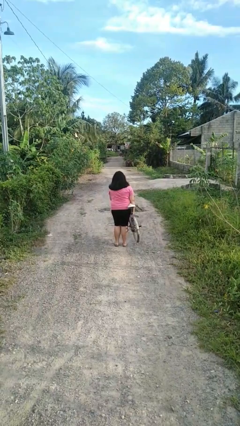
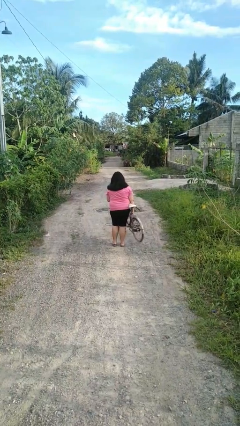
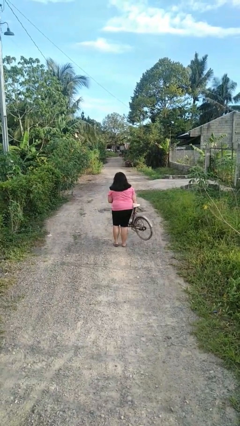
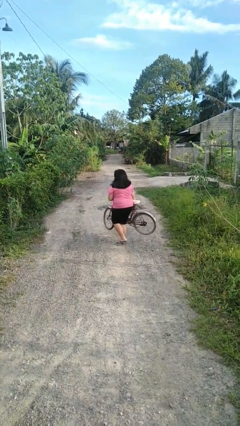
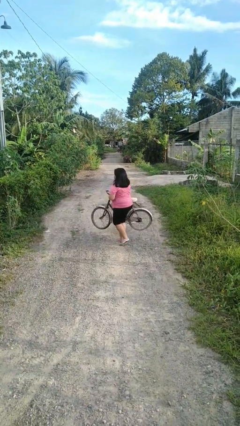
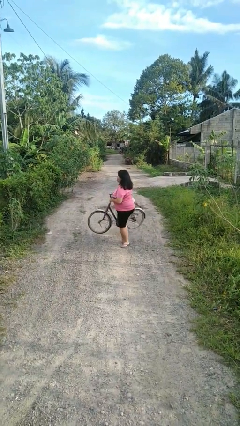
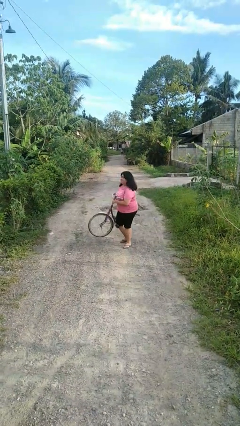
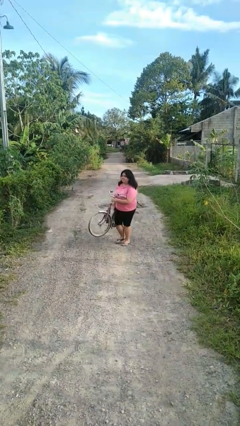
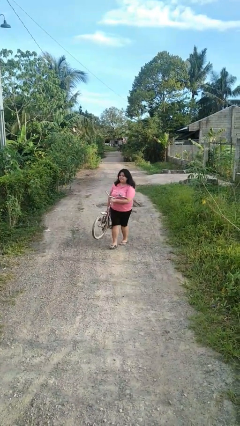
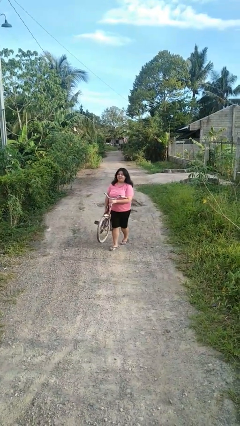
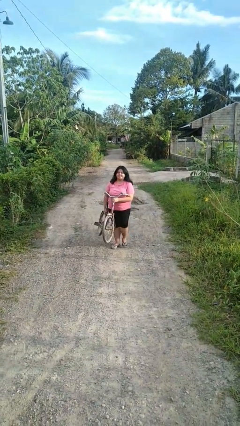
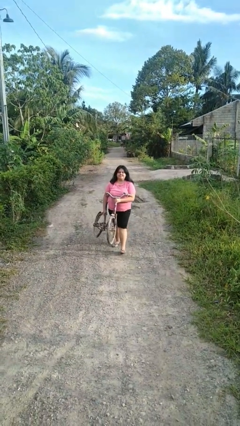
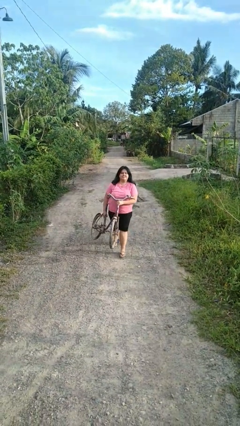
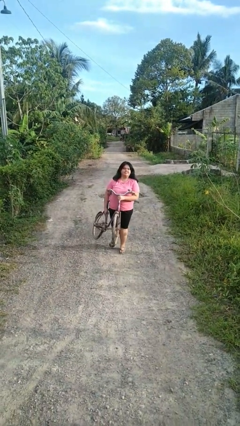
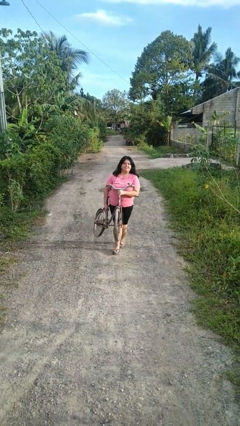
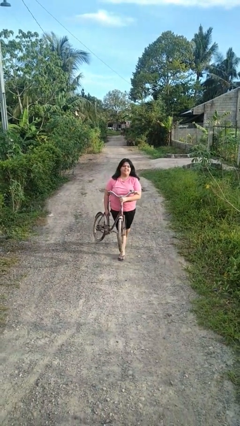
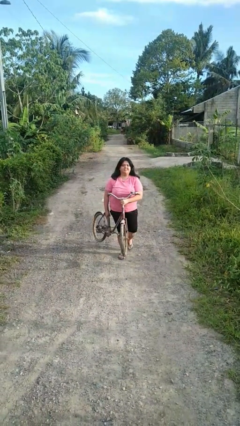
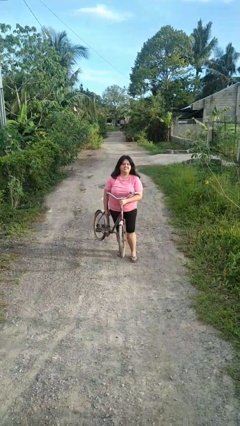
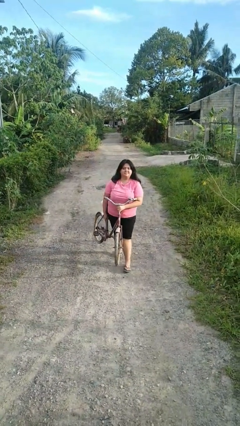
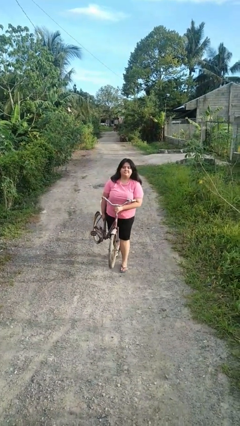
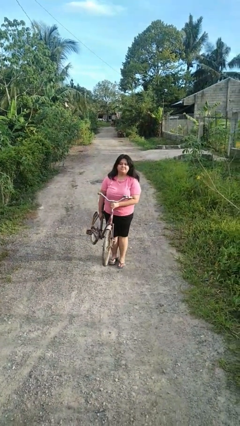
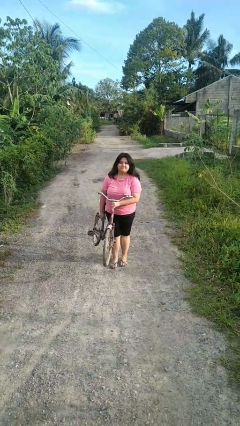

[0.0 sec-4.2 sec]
person carries bicycle

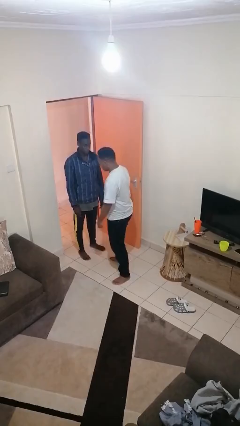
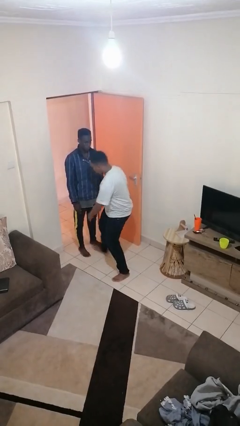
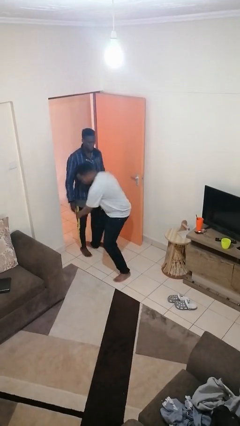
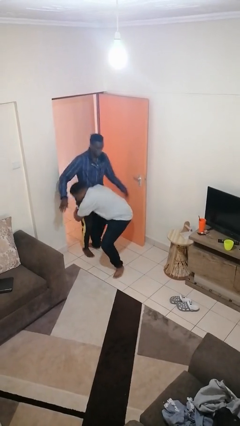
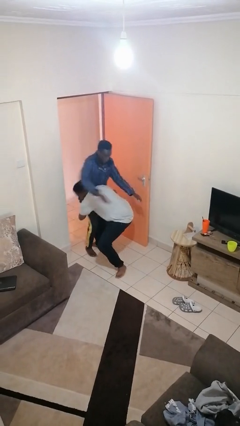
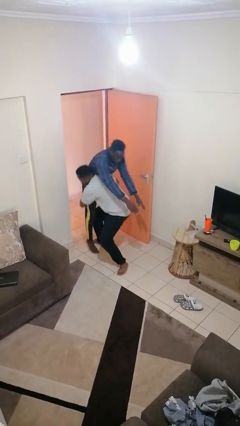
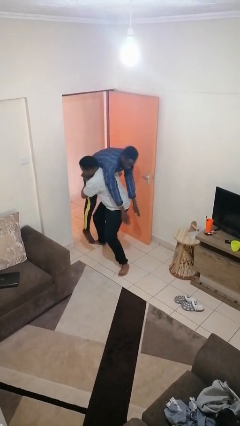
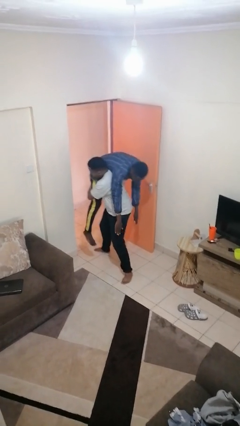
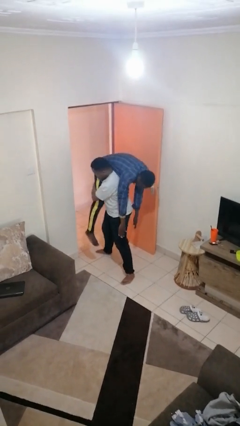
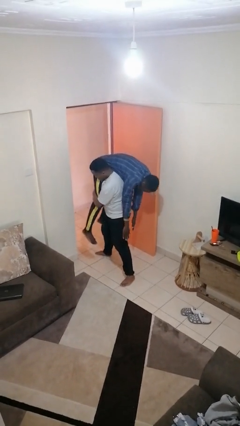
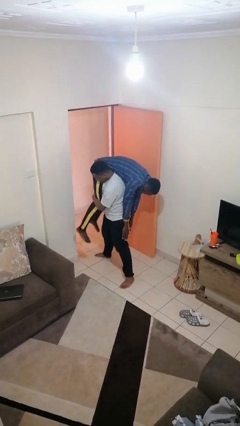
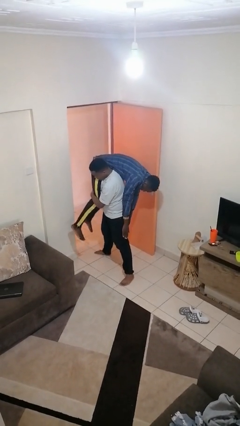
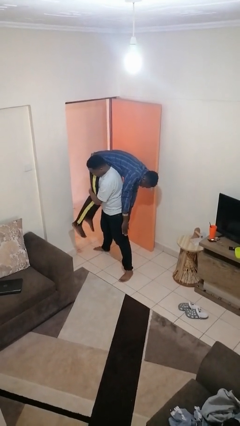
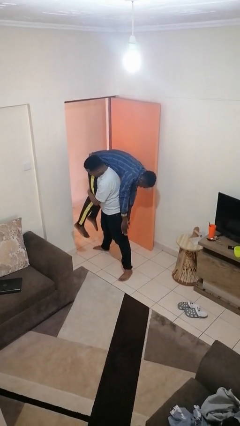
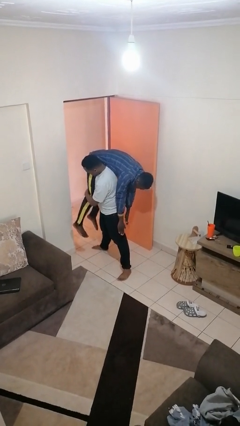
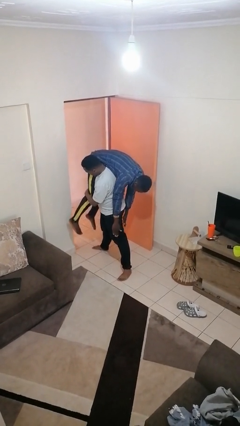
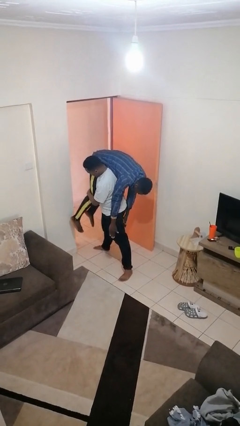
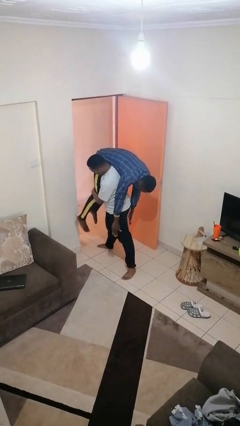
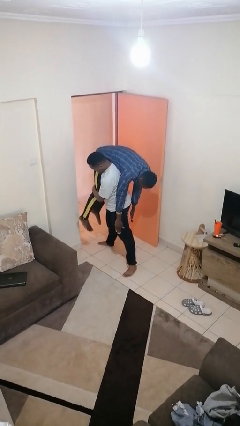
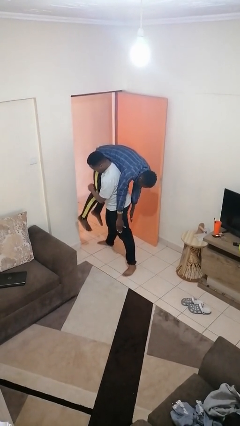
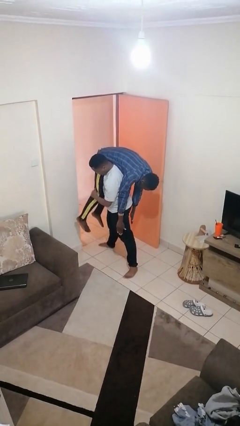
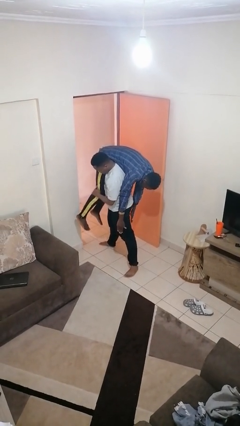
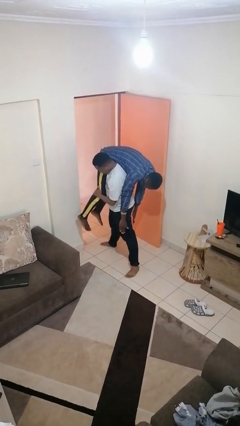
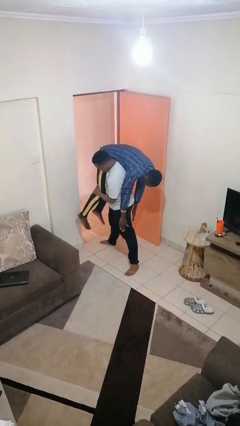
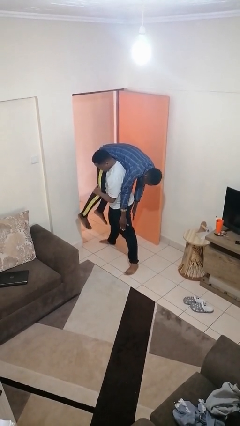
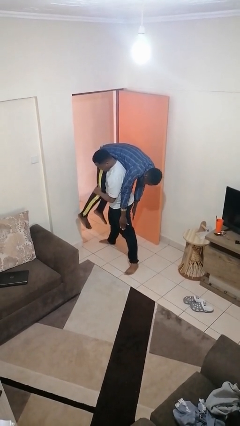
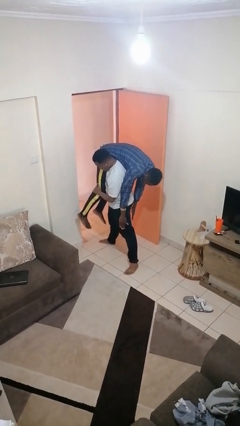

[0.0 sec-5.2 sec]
person carries person over shoulder

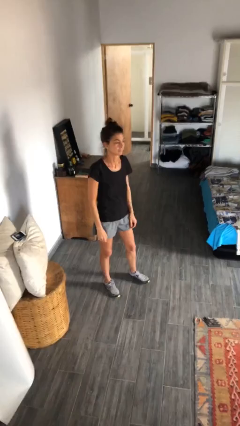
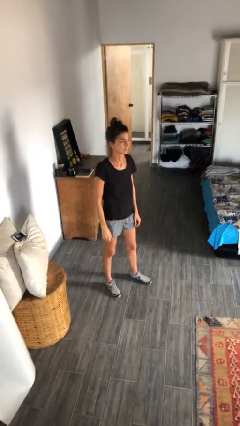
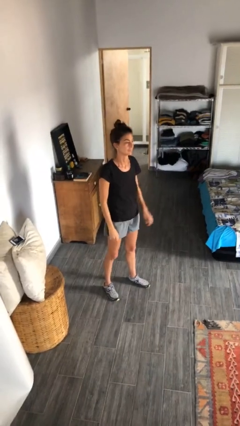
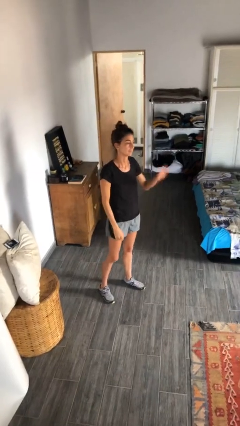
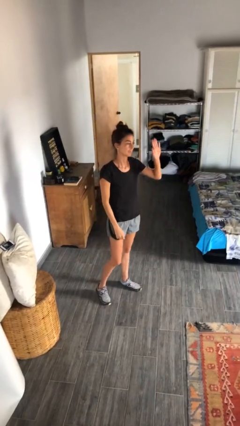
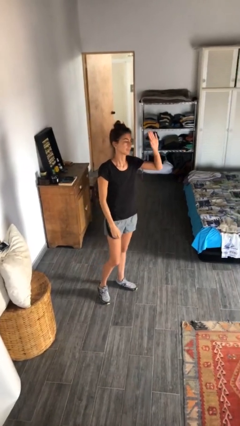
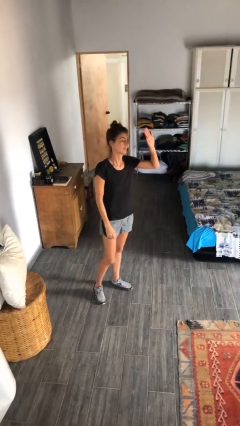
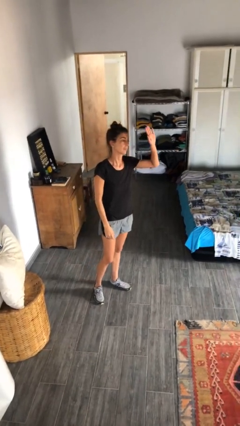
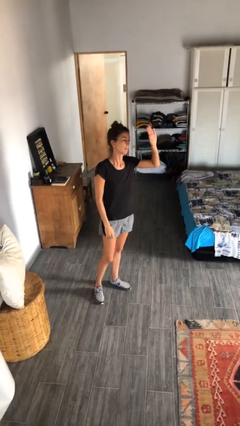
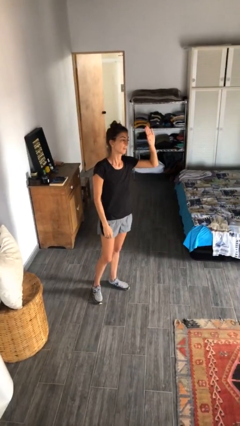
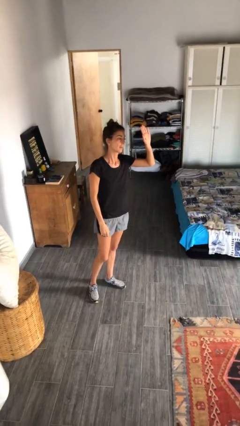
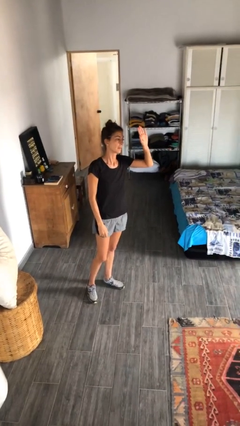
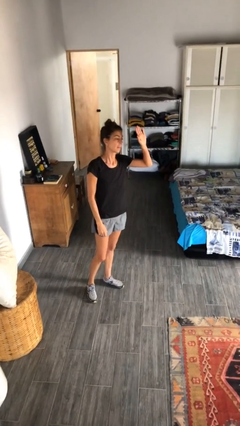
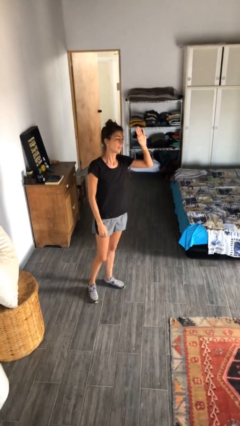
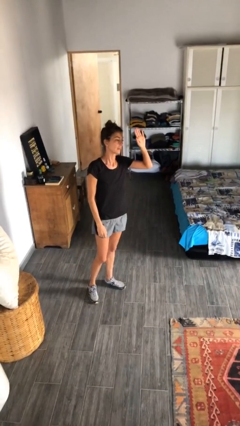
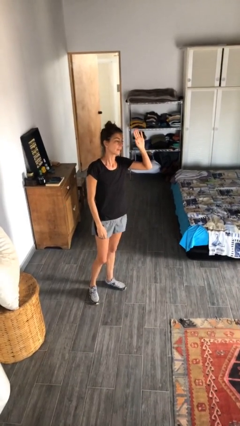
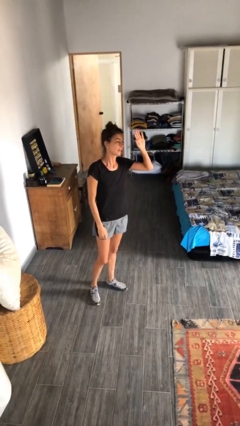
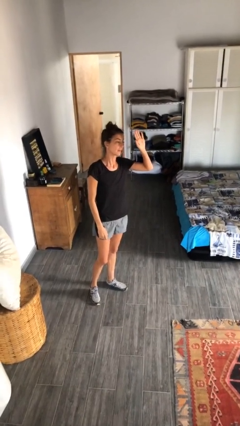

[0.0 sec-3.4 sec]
person gestures raise hand

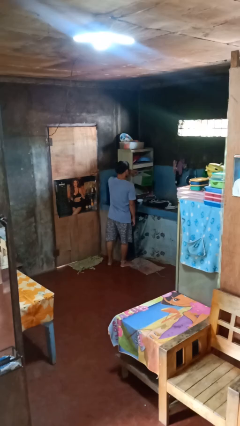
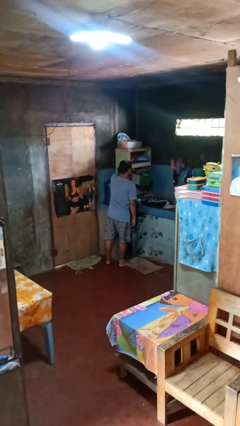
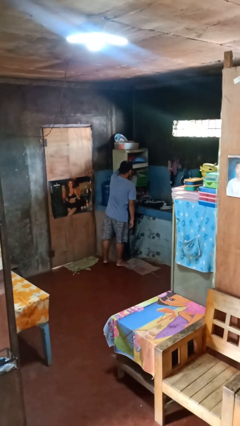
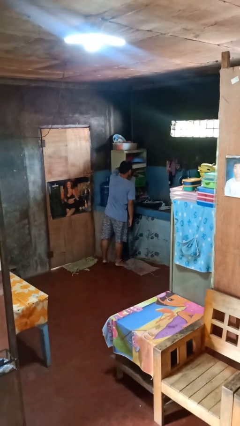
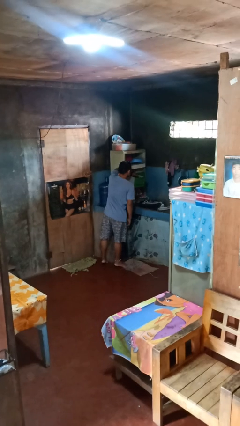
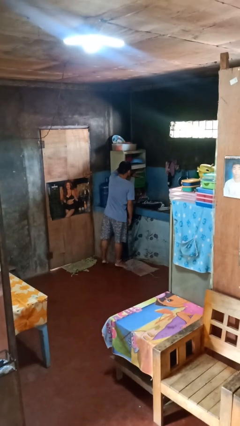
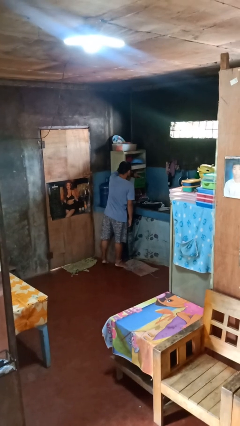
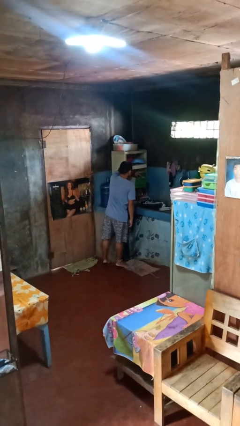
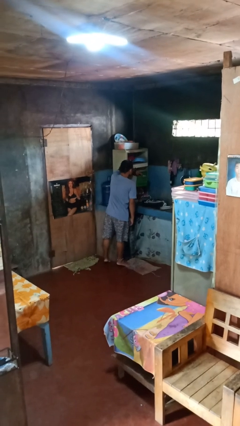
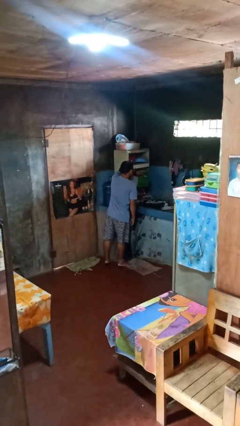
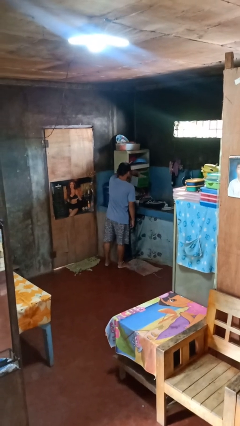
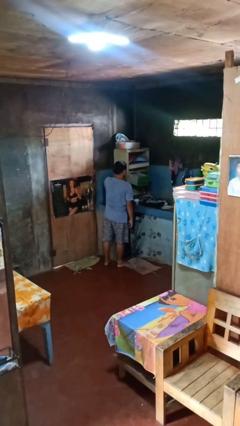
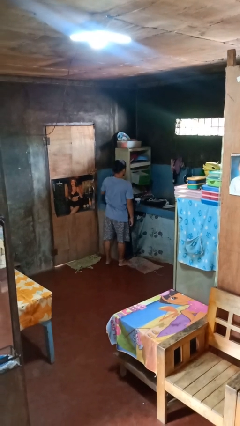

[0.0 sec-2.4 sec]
person searches in kitchen drawer

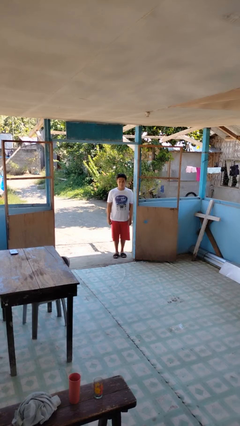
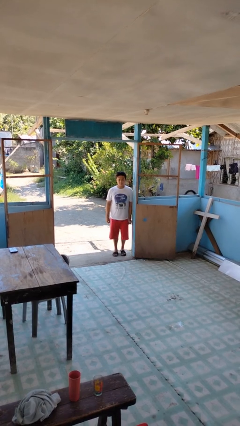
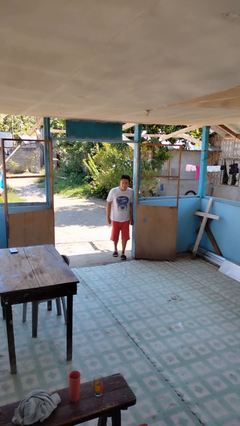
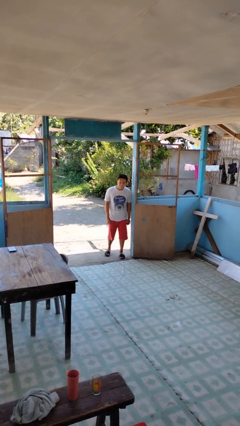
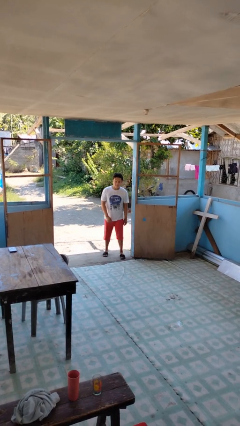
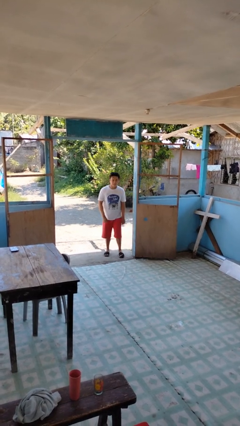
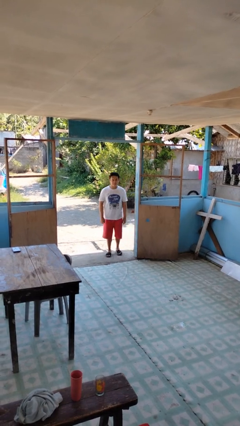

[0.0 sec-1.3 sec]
person bumps into wall

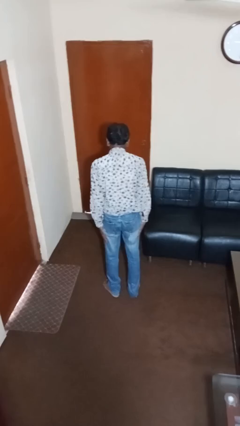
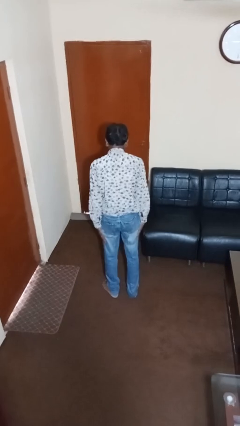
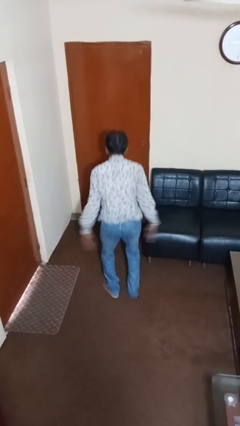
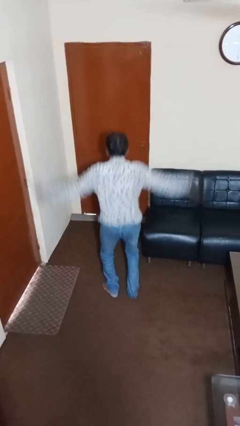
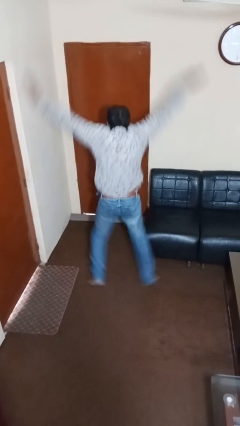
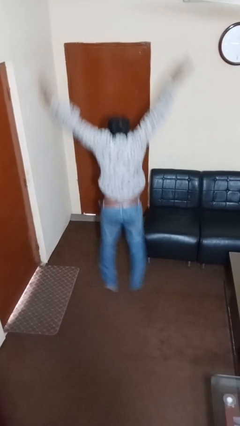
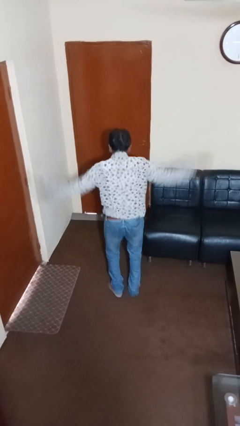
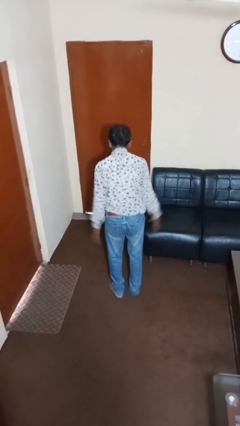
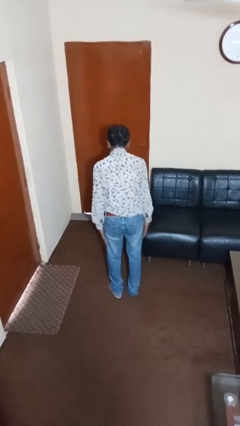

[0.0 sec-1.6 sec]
person exercises with jumping jacks
